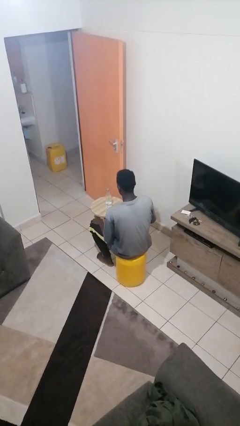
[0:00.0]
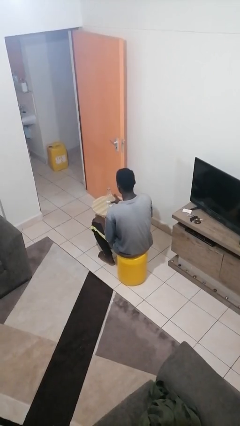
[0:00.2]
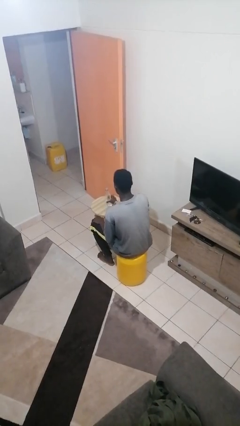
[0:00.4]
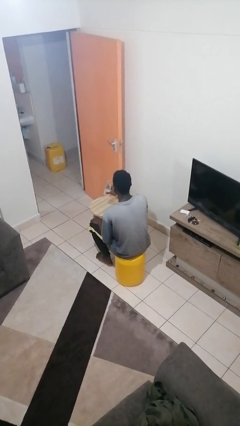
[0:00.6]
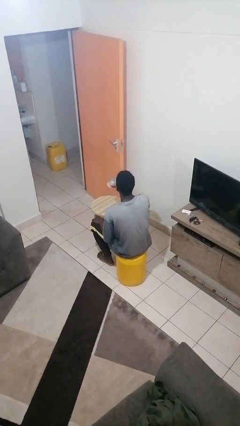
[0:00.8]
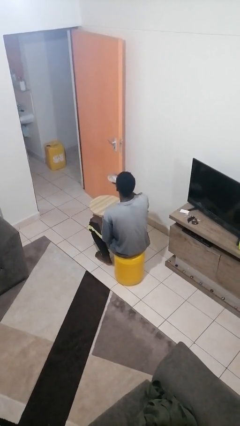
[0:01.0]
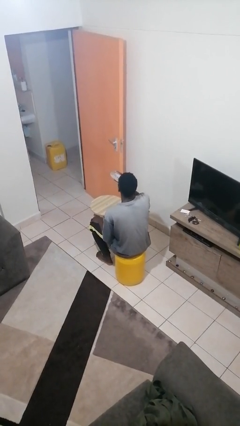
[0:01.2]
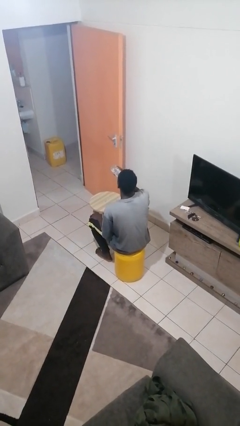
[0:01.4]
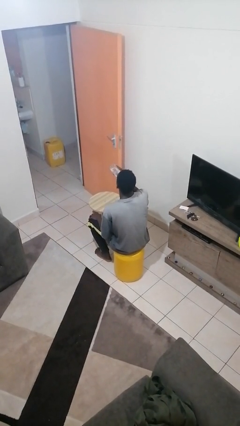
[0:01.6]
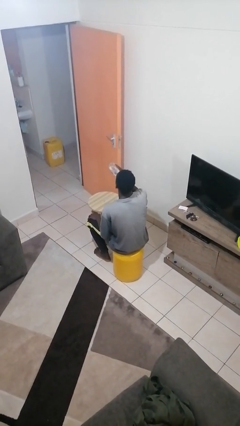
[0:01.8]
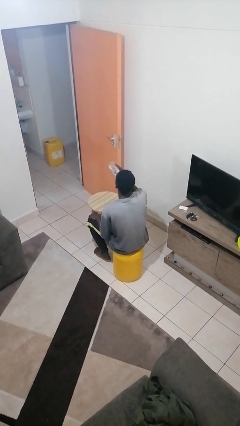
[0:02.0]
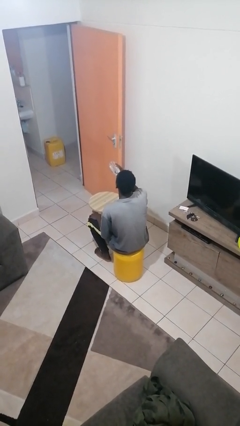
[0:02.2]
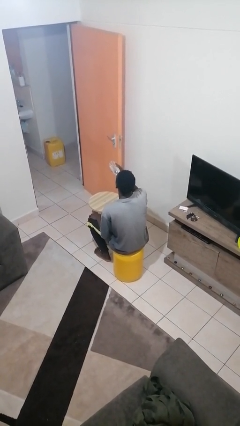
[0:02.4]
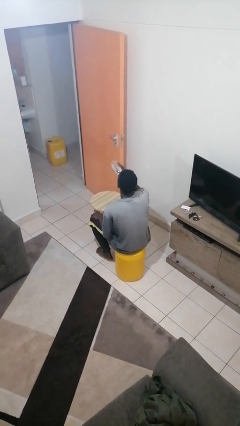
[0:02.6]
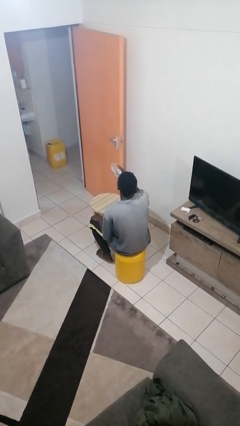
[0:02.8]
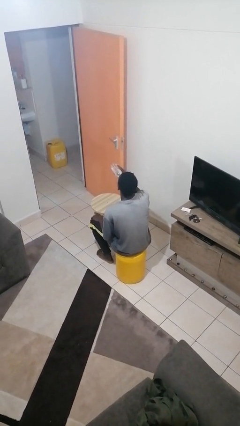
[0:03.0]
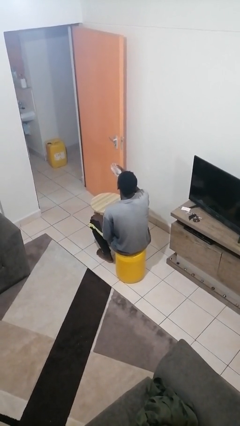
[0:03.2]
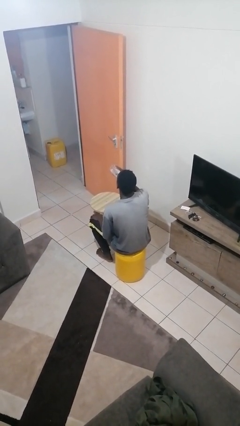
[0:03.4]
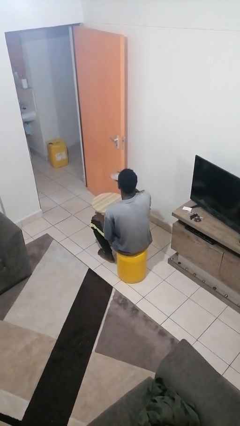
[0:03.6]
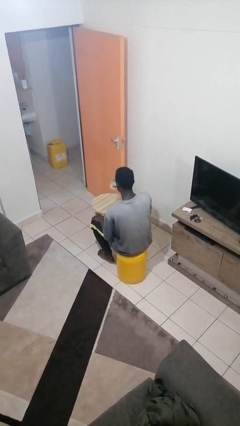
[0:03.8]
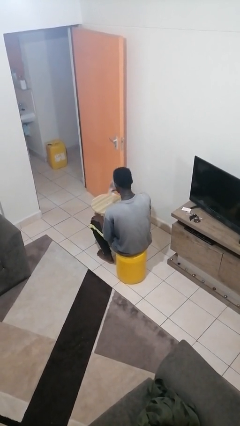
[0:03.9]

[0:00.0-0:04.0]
person drinks from bottle

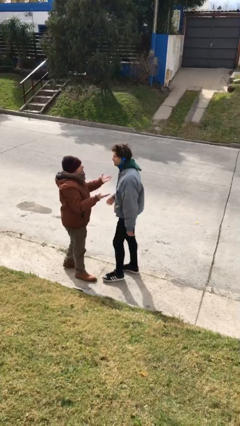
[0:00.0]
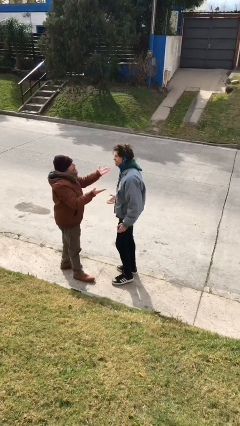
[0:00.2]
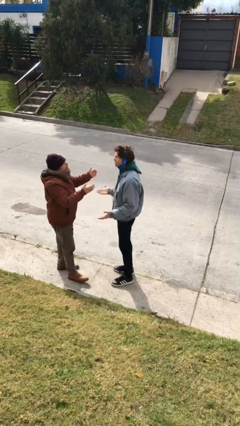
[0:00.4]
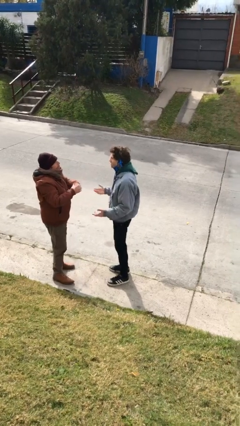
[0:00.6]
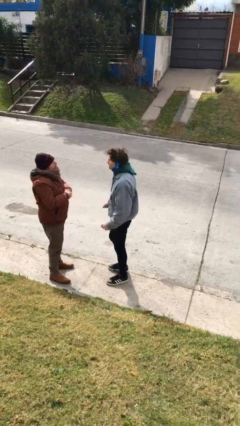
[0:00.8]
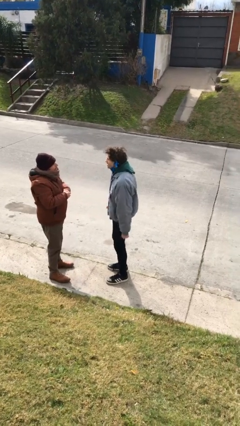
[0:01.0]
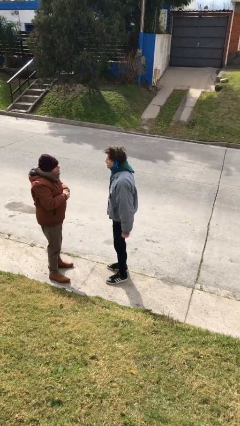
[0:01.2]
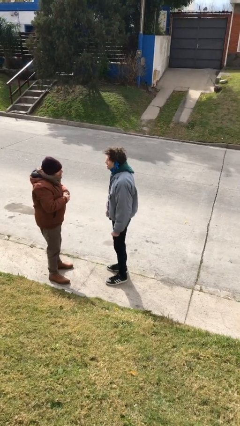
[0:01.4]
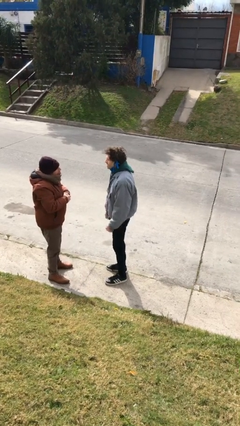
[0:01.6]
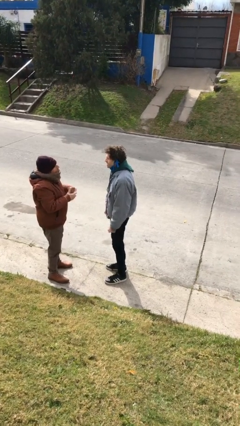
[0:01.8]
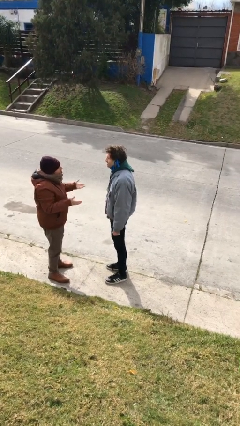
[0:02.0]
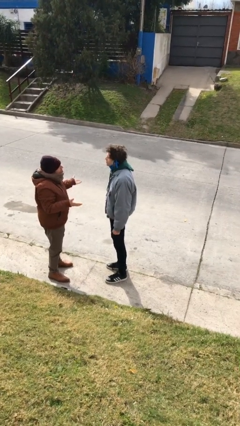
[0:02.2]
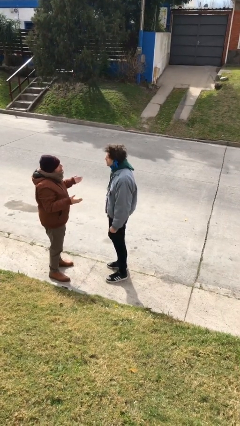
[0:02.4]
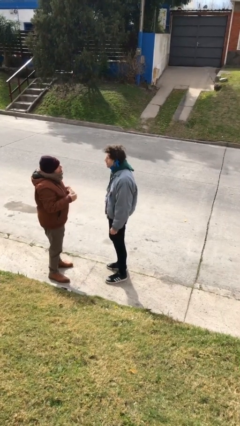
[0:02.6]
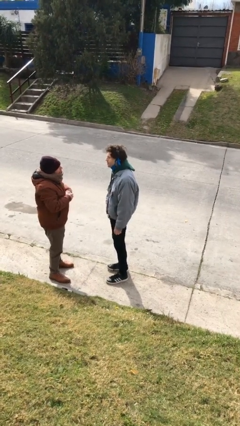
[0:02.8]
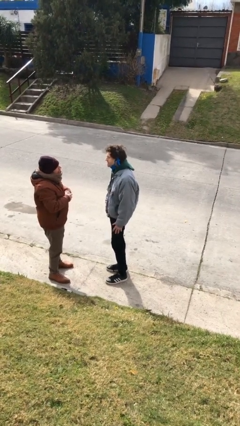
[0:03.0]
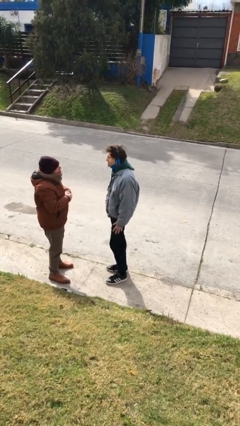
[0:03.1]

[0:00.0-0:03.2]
person talks to person

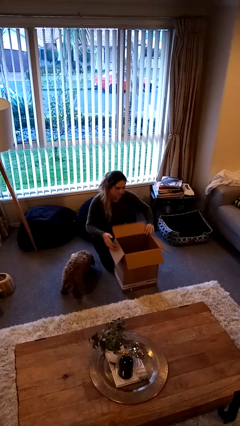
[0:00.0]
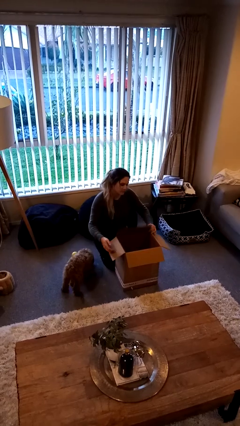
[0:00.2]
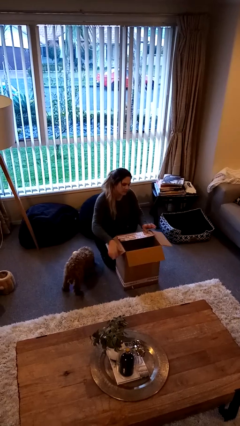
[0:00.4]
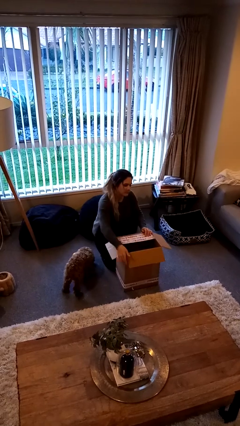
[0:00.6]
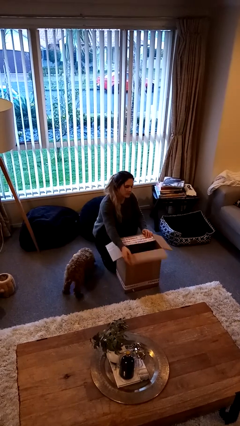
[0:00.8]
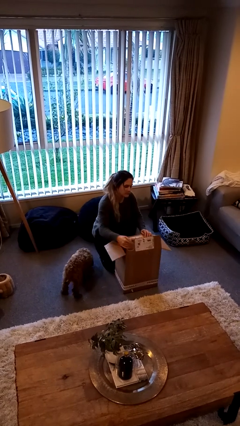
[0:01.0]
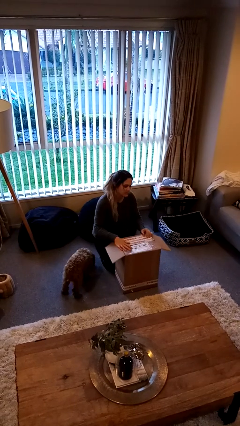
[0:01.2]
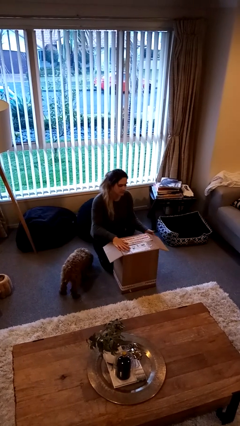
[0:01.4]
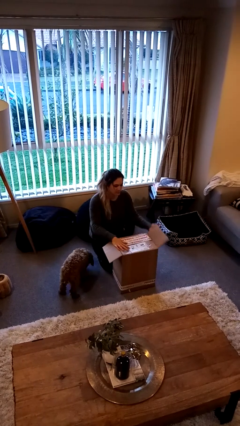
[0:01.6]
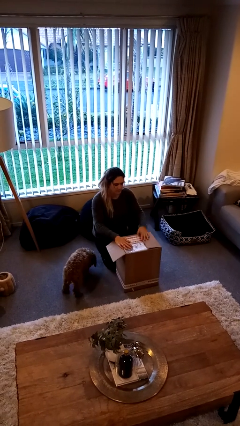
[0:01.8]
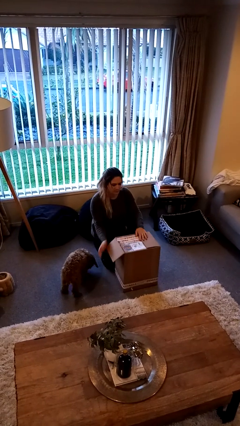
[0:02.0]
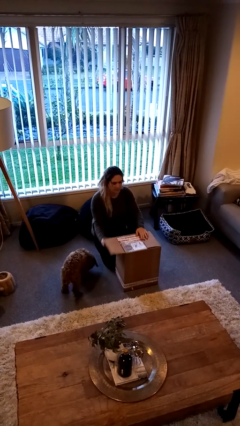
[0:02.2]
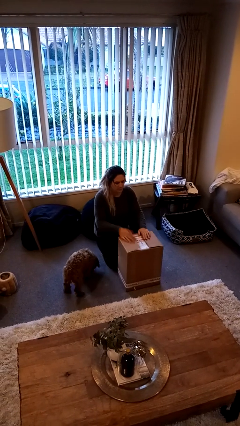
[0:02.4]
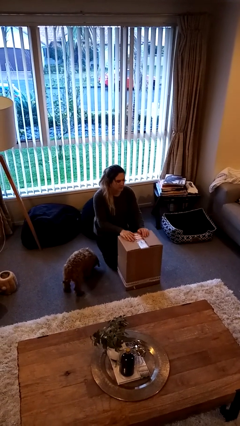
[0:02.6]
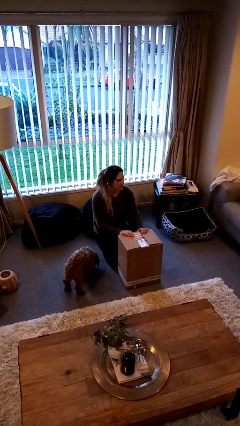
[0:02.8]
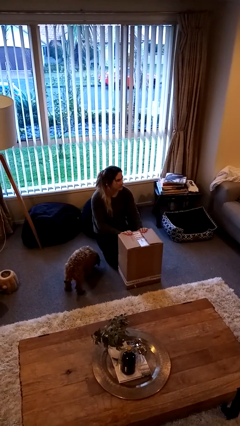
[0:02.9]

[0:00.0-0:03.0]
person closes box

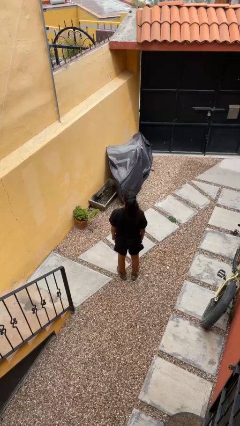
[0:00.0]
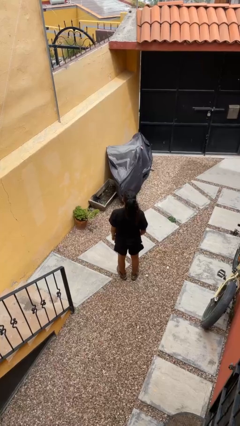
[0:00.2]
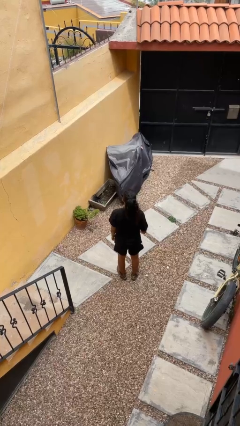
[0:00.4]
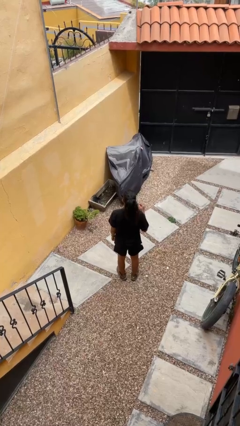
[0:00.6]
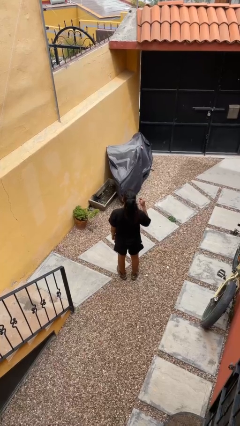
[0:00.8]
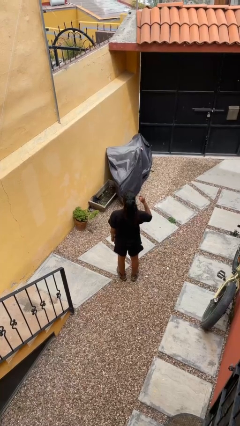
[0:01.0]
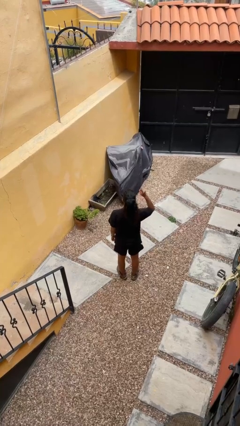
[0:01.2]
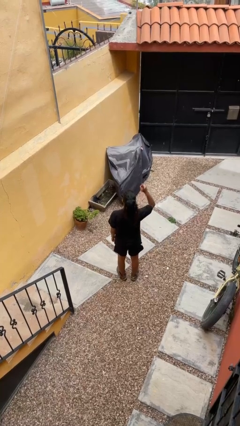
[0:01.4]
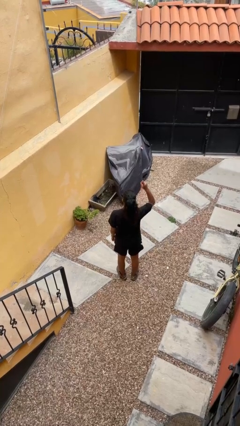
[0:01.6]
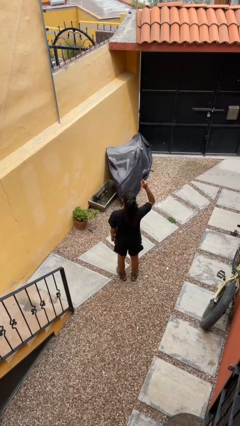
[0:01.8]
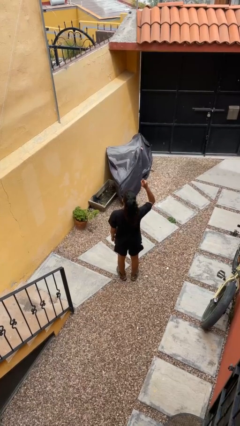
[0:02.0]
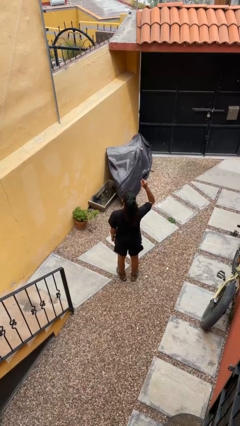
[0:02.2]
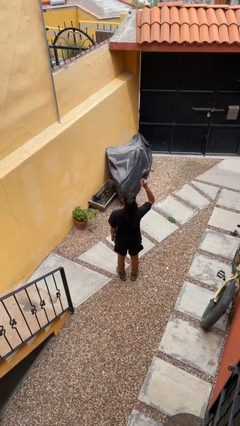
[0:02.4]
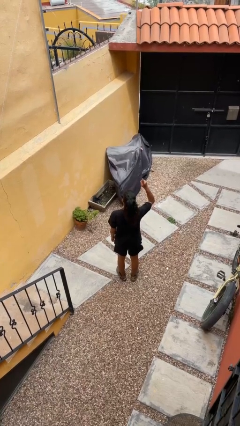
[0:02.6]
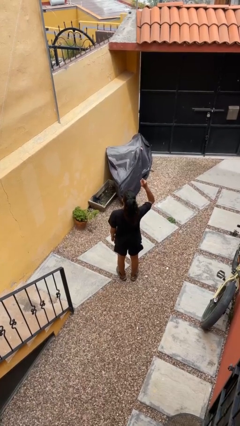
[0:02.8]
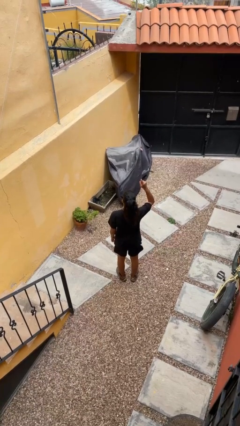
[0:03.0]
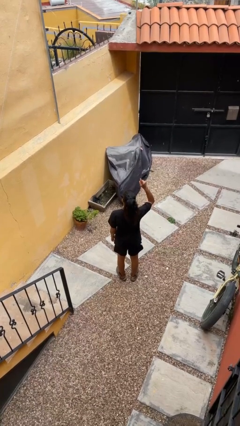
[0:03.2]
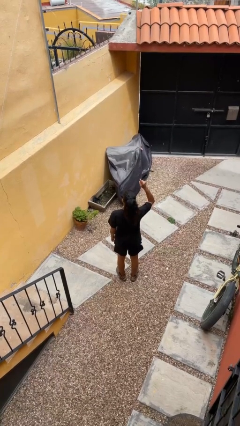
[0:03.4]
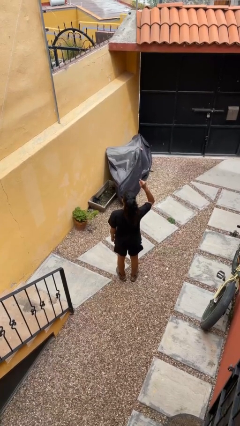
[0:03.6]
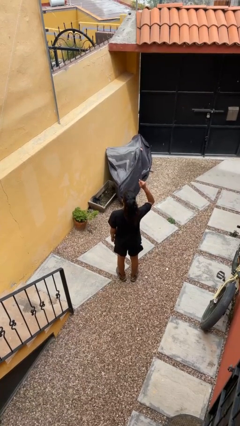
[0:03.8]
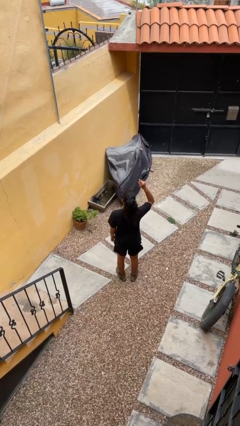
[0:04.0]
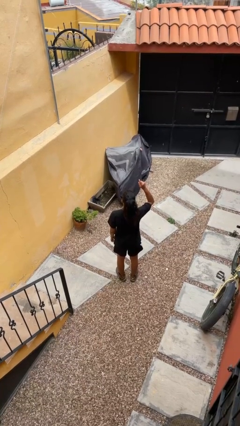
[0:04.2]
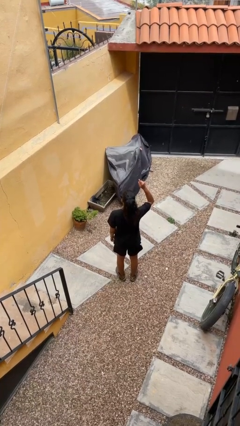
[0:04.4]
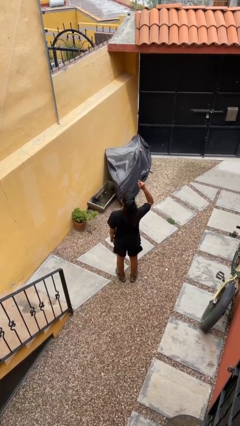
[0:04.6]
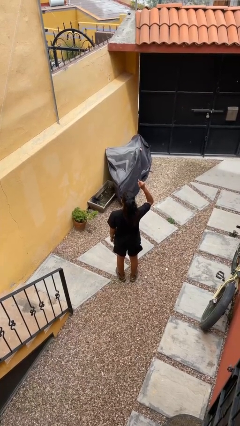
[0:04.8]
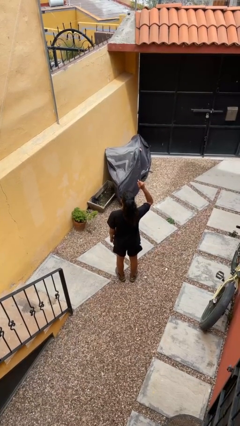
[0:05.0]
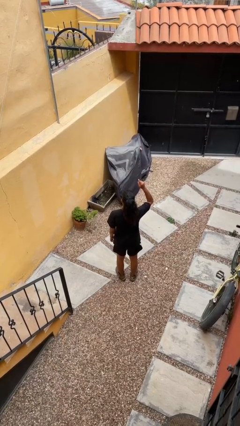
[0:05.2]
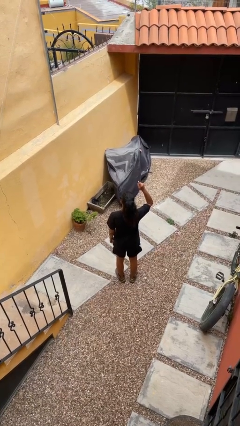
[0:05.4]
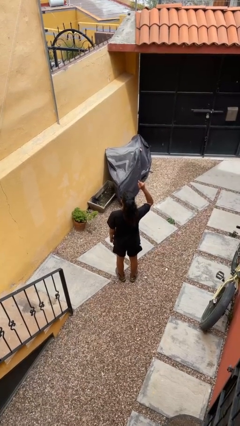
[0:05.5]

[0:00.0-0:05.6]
person gestures raise hand

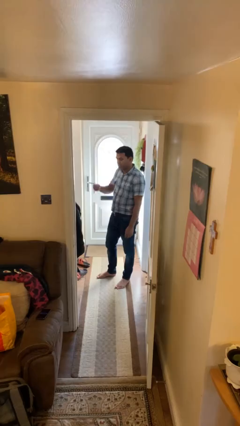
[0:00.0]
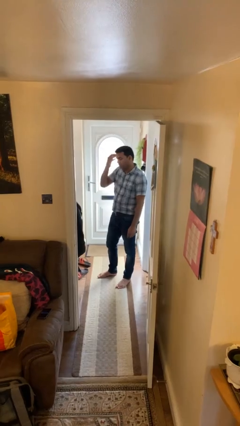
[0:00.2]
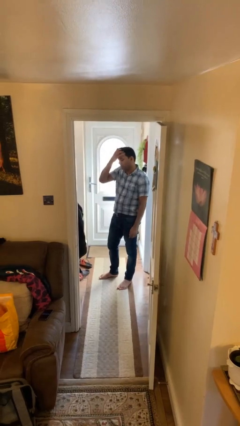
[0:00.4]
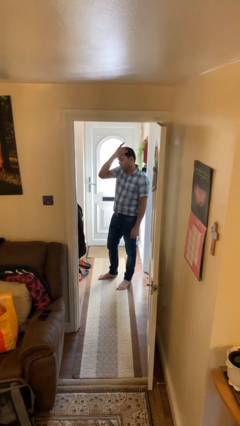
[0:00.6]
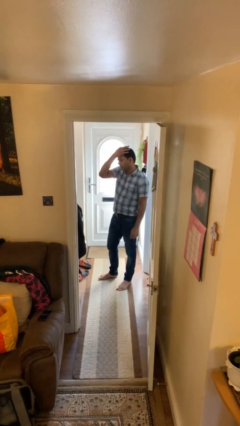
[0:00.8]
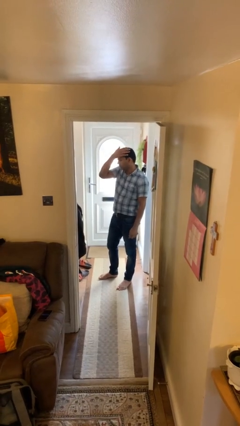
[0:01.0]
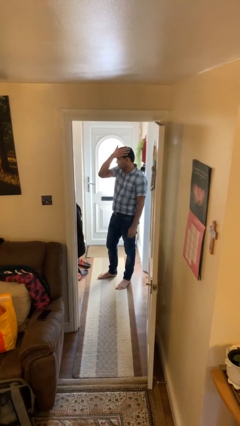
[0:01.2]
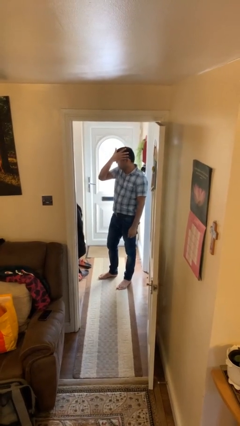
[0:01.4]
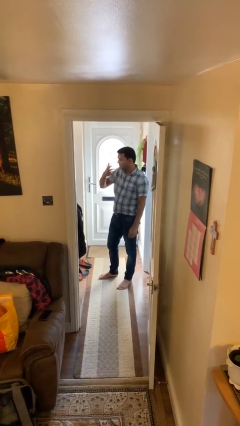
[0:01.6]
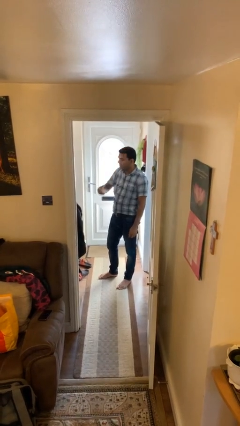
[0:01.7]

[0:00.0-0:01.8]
person strokes hair
